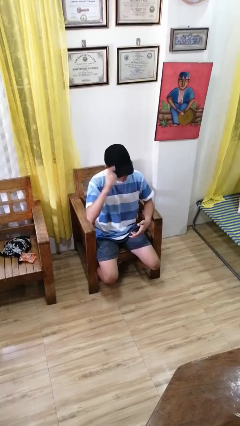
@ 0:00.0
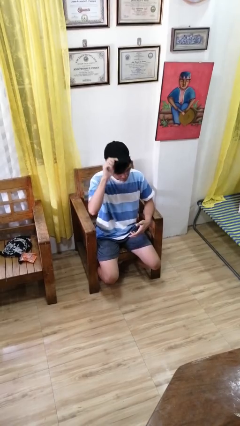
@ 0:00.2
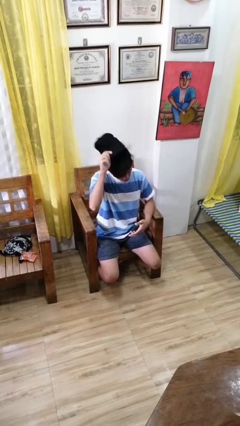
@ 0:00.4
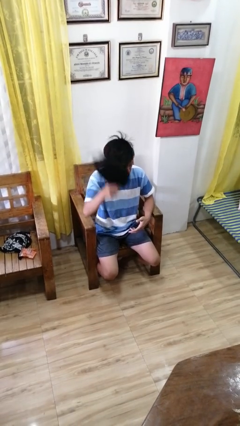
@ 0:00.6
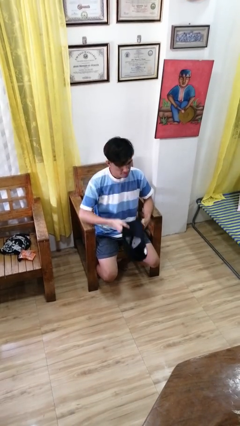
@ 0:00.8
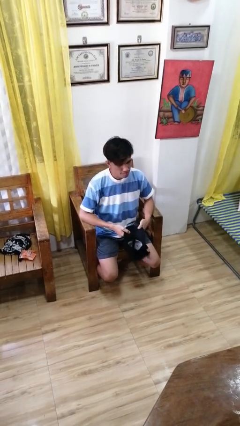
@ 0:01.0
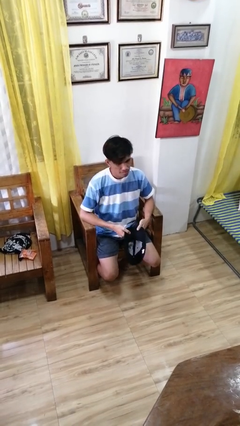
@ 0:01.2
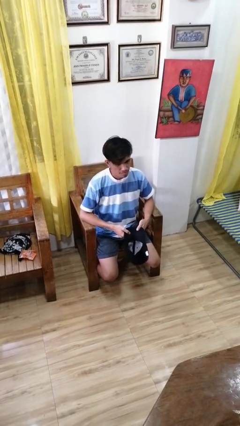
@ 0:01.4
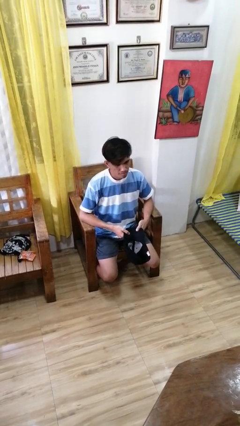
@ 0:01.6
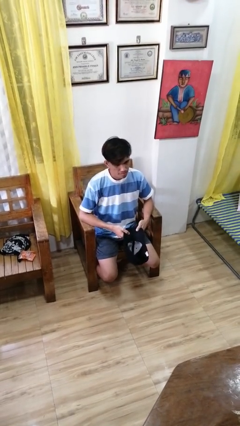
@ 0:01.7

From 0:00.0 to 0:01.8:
person takes off hat

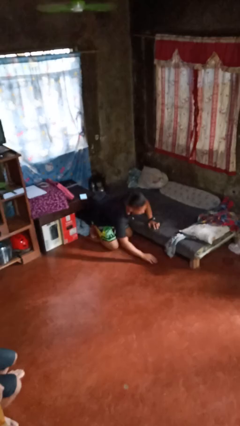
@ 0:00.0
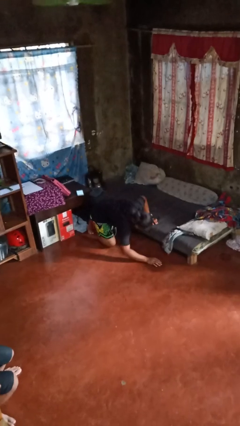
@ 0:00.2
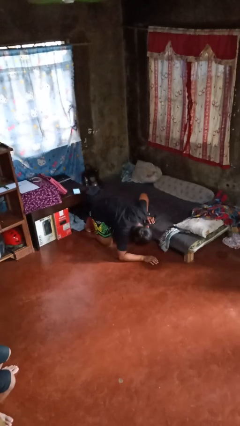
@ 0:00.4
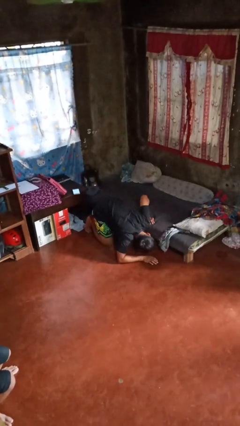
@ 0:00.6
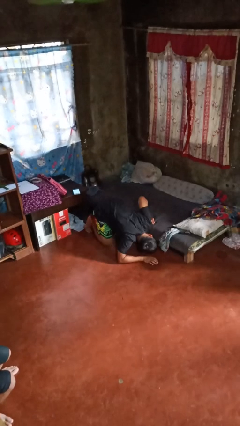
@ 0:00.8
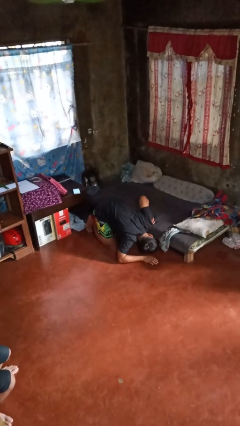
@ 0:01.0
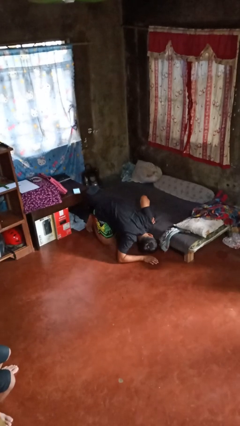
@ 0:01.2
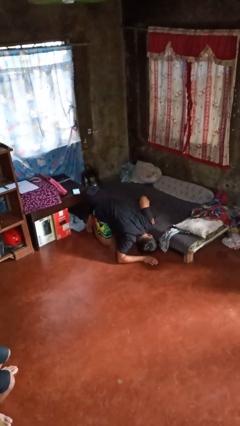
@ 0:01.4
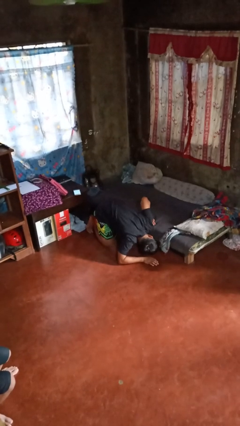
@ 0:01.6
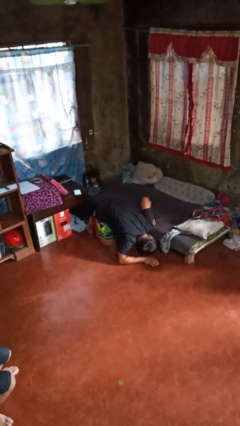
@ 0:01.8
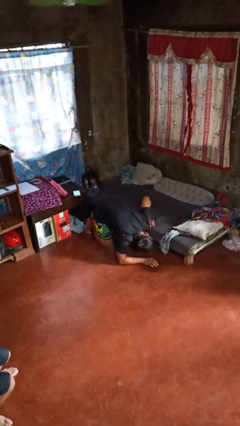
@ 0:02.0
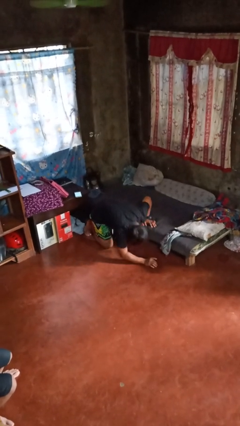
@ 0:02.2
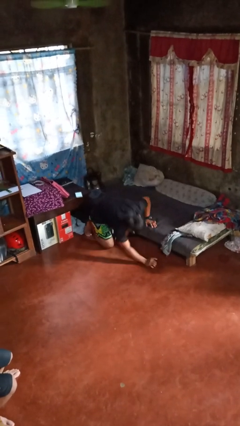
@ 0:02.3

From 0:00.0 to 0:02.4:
person searches under bed

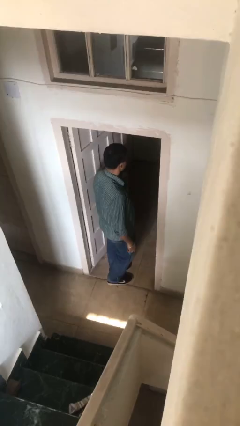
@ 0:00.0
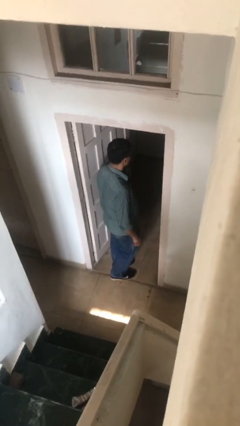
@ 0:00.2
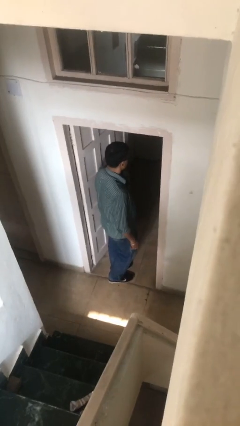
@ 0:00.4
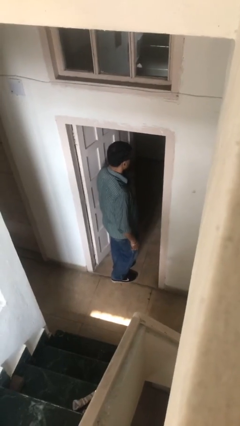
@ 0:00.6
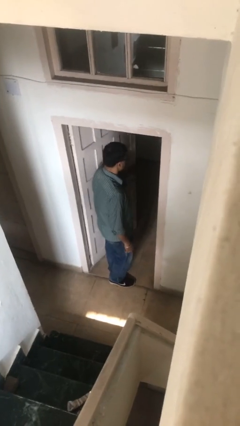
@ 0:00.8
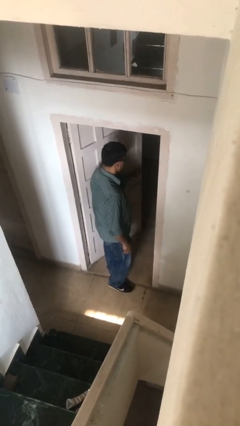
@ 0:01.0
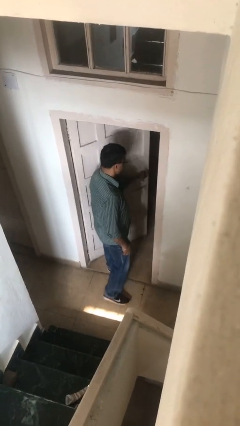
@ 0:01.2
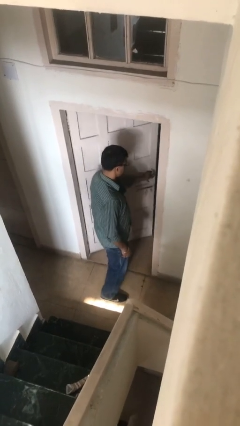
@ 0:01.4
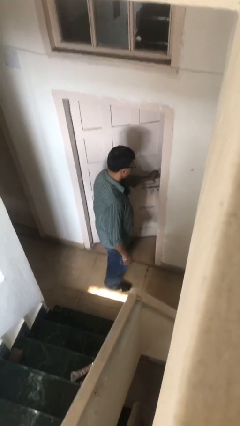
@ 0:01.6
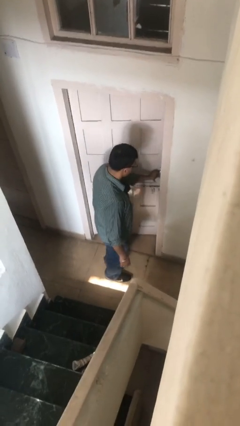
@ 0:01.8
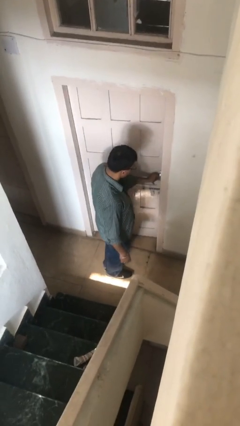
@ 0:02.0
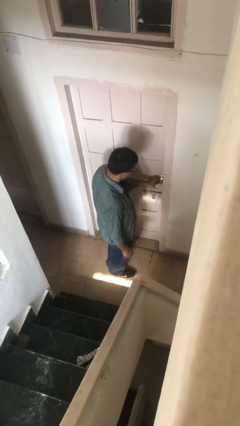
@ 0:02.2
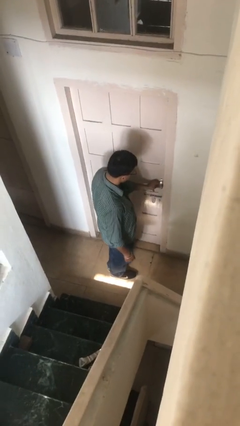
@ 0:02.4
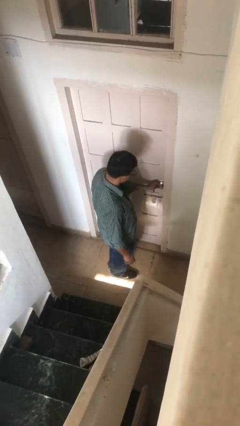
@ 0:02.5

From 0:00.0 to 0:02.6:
person closes facility door

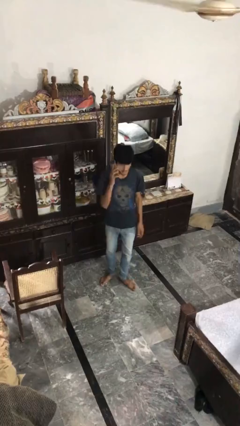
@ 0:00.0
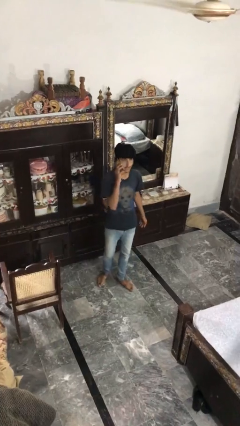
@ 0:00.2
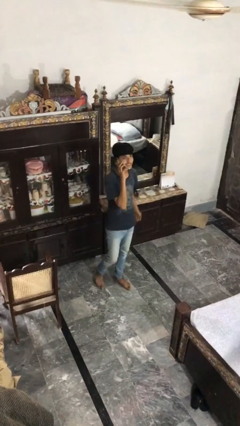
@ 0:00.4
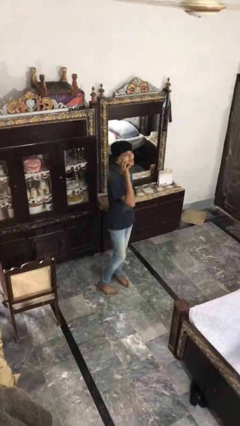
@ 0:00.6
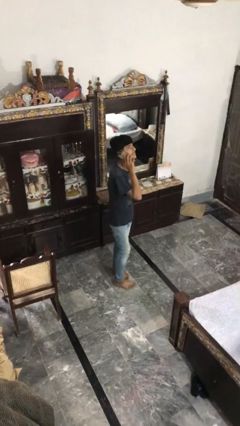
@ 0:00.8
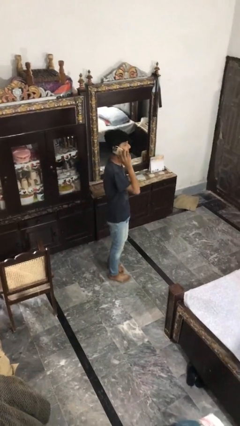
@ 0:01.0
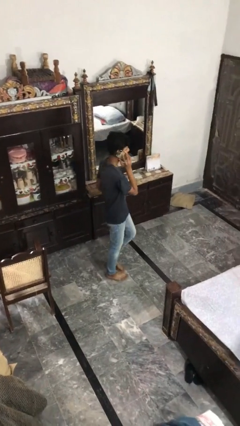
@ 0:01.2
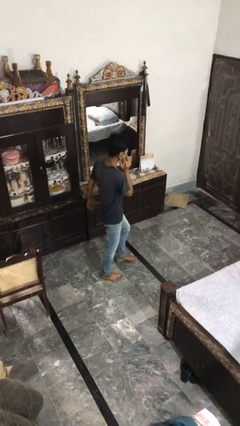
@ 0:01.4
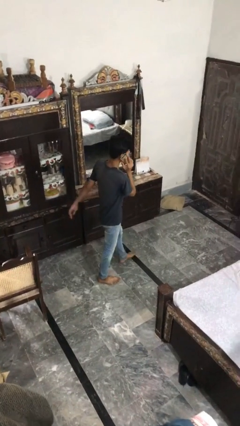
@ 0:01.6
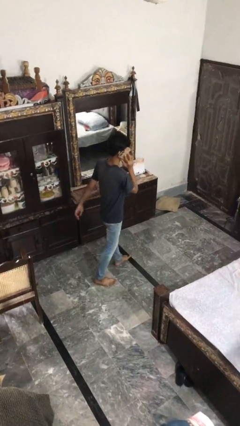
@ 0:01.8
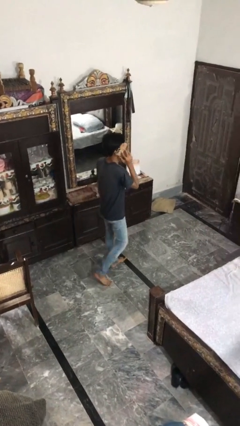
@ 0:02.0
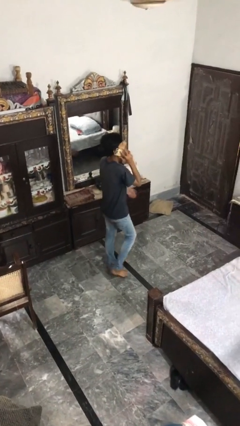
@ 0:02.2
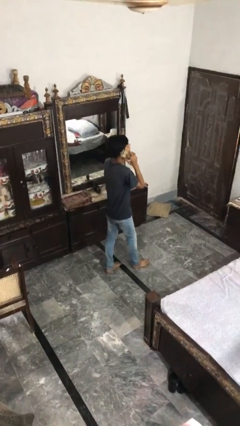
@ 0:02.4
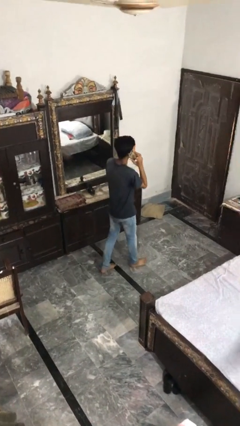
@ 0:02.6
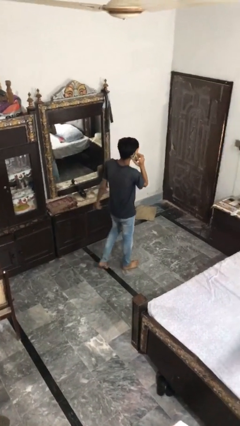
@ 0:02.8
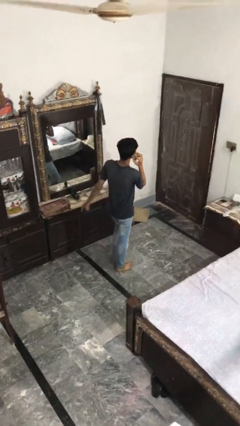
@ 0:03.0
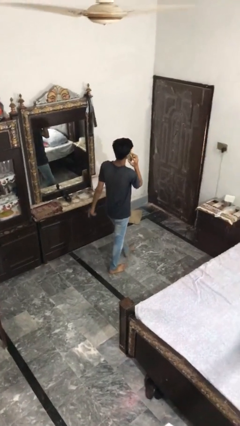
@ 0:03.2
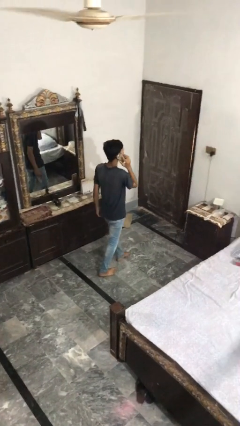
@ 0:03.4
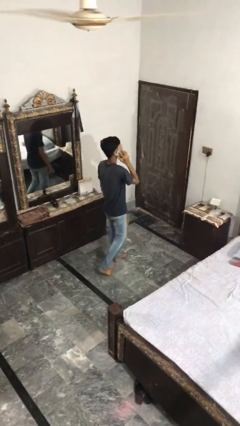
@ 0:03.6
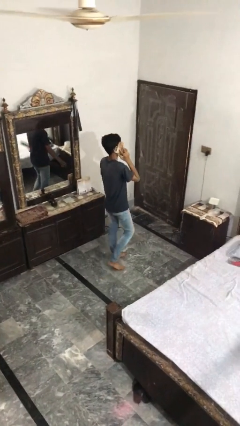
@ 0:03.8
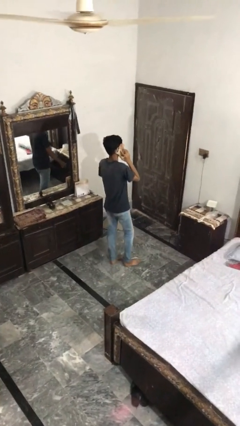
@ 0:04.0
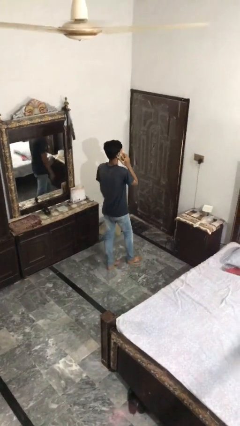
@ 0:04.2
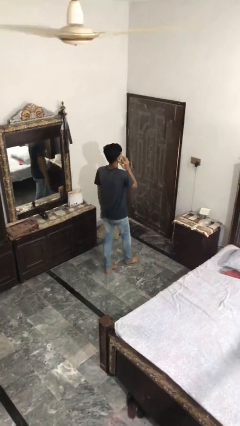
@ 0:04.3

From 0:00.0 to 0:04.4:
person talks on phone

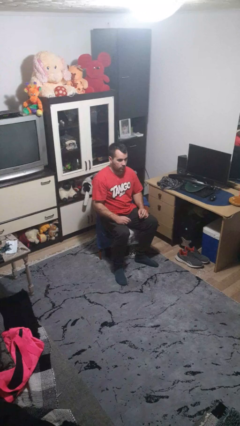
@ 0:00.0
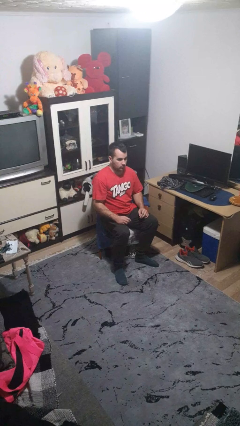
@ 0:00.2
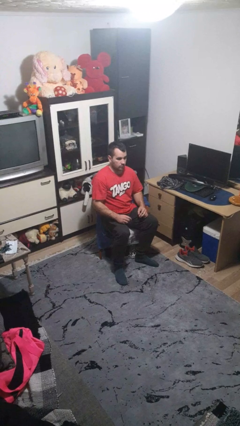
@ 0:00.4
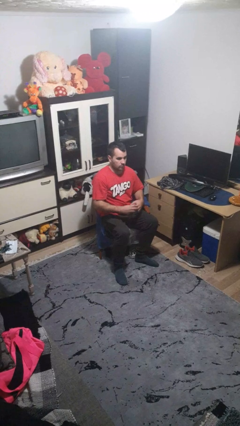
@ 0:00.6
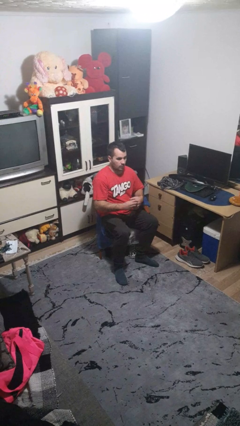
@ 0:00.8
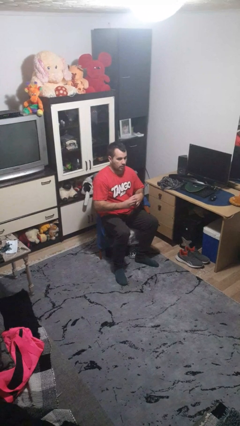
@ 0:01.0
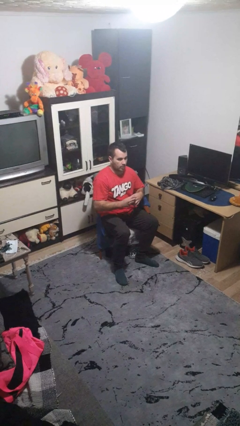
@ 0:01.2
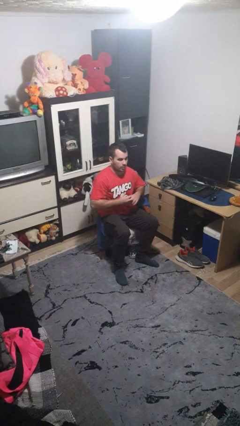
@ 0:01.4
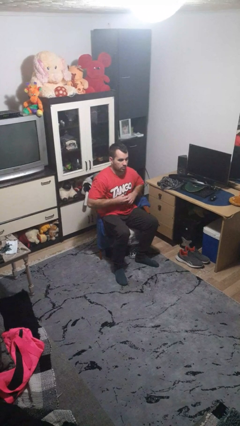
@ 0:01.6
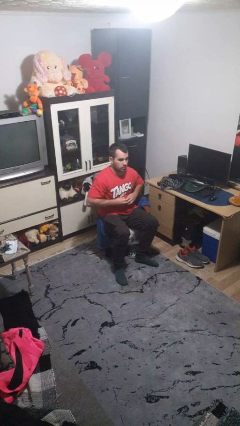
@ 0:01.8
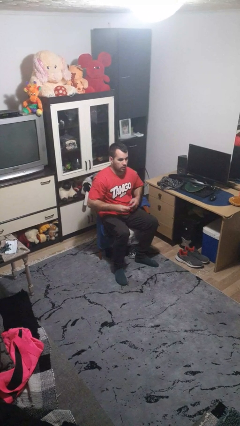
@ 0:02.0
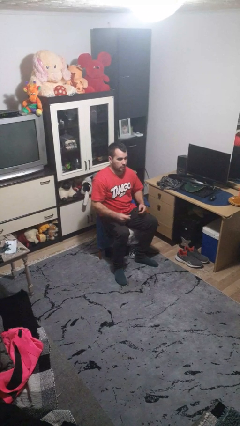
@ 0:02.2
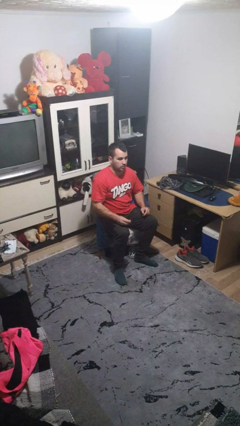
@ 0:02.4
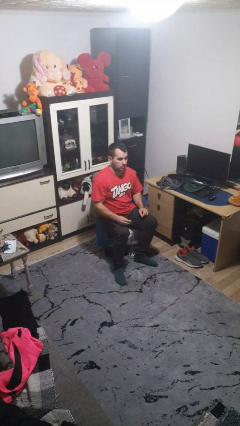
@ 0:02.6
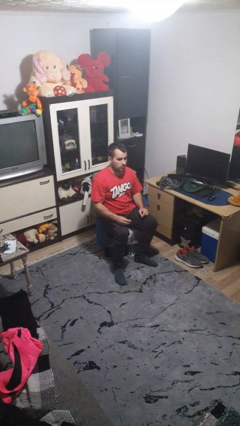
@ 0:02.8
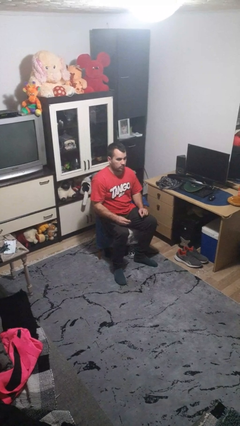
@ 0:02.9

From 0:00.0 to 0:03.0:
person takes off ring

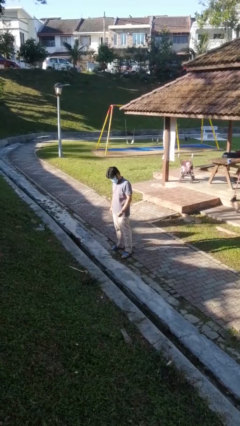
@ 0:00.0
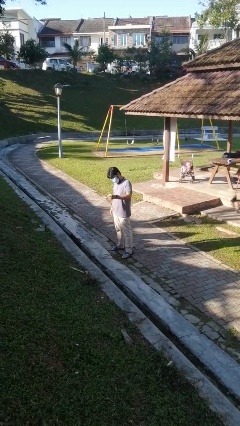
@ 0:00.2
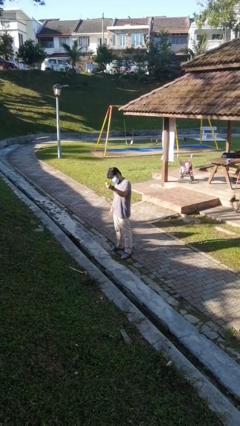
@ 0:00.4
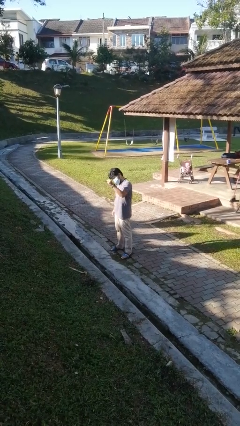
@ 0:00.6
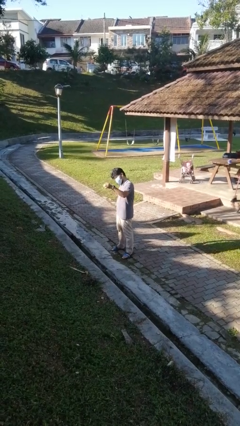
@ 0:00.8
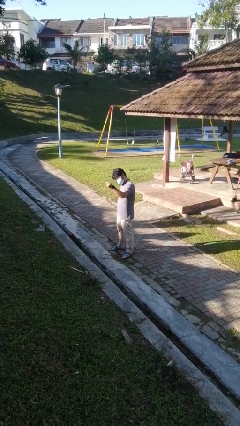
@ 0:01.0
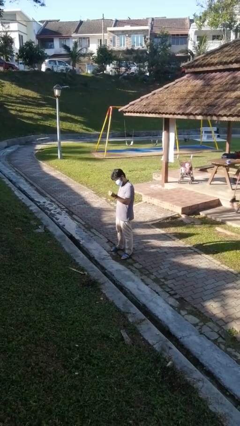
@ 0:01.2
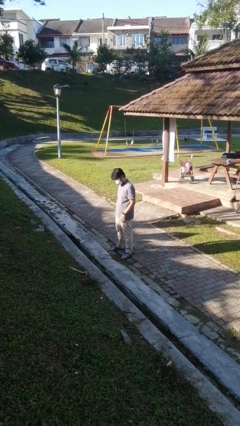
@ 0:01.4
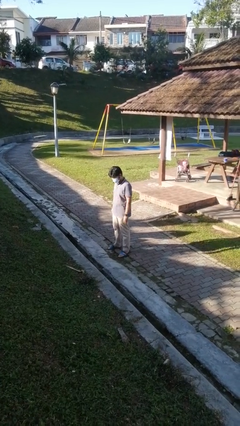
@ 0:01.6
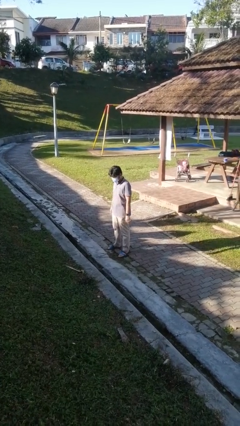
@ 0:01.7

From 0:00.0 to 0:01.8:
person snaps fingers

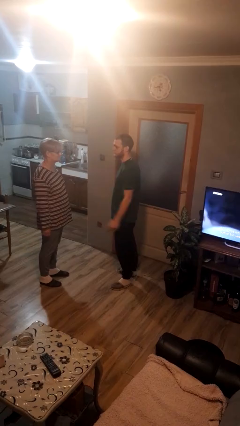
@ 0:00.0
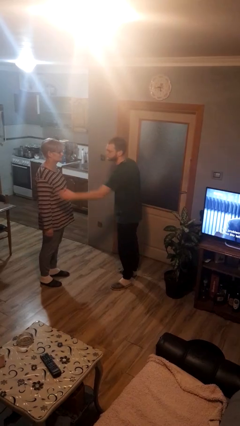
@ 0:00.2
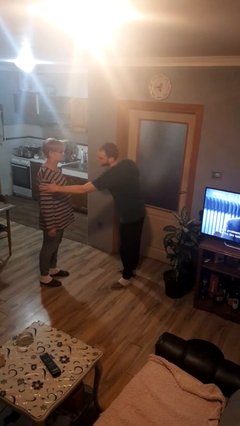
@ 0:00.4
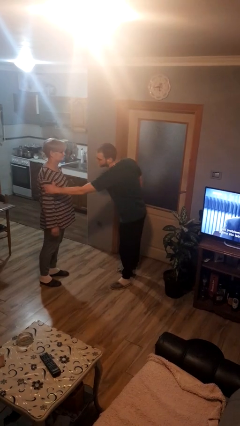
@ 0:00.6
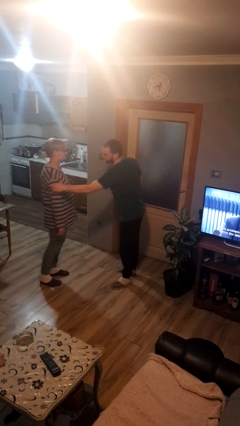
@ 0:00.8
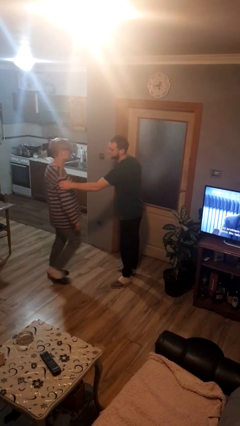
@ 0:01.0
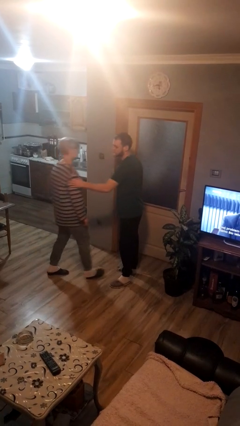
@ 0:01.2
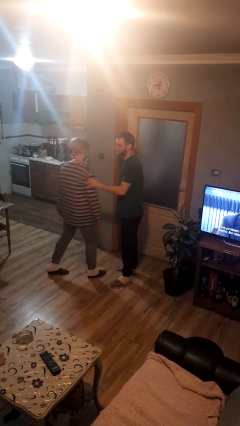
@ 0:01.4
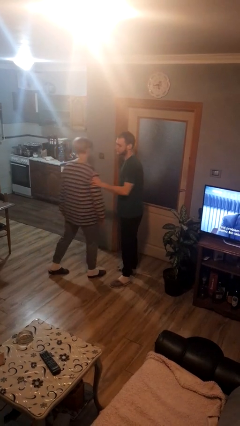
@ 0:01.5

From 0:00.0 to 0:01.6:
person grabs person by bicep
